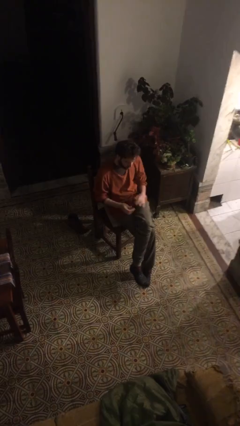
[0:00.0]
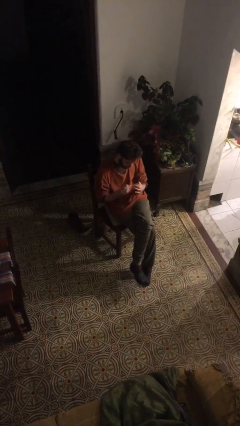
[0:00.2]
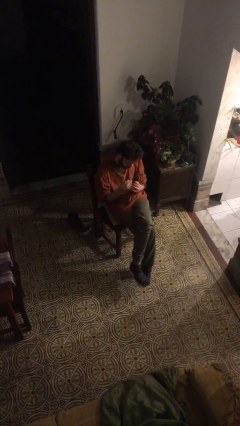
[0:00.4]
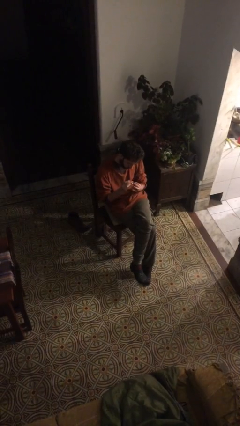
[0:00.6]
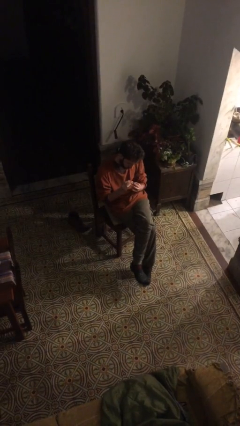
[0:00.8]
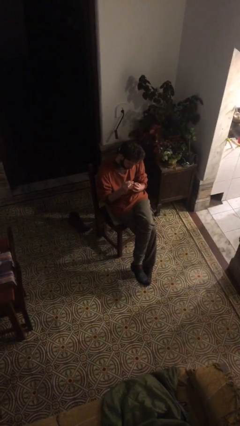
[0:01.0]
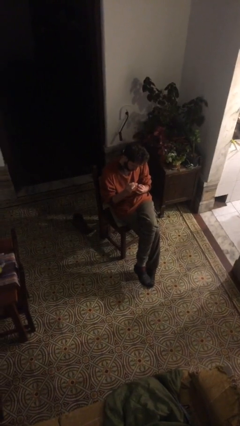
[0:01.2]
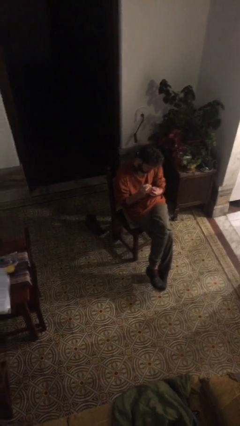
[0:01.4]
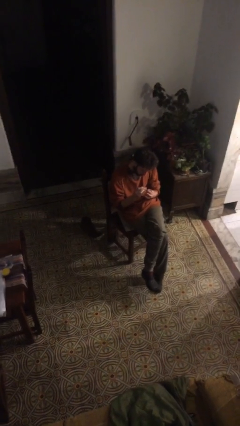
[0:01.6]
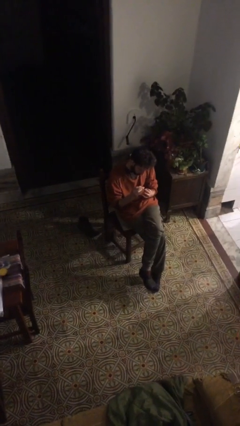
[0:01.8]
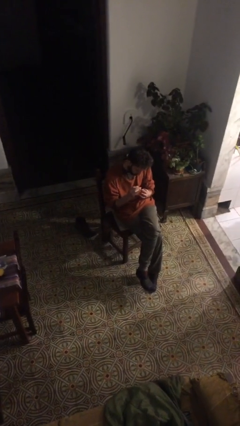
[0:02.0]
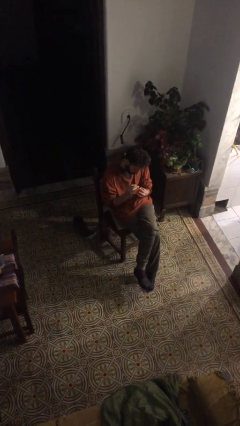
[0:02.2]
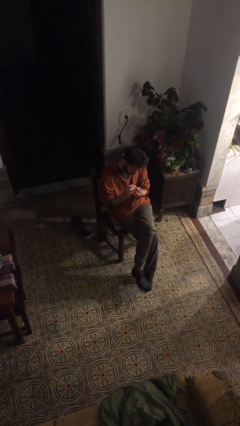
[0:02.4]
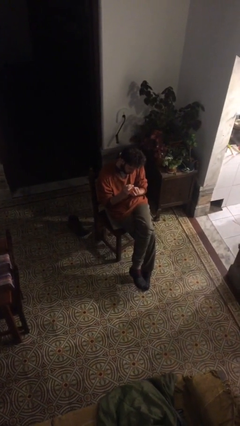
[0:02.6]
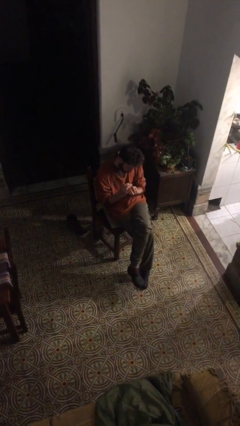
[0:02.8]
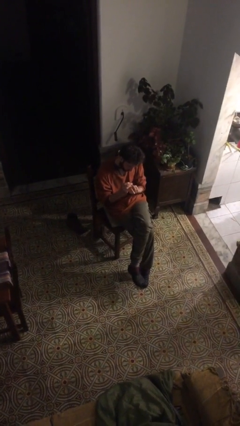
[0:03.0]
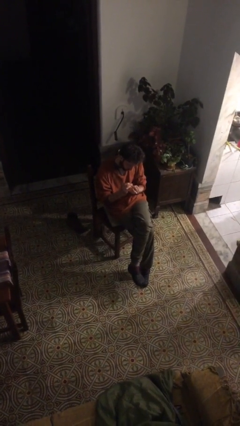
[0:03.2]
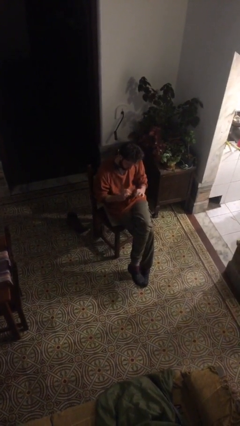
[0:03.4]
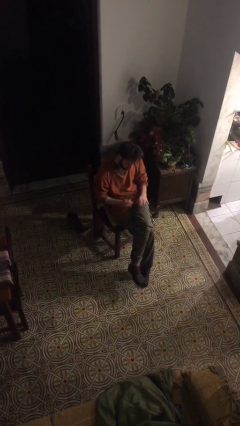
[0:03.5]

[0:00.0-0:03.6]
person clips fingernails

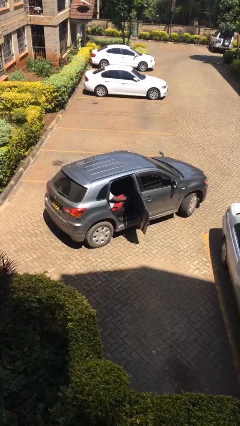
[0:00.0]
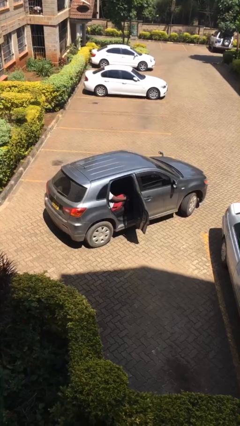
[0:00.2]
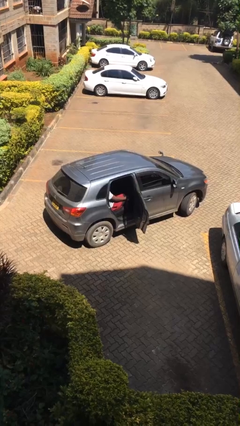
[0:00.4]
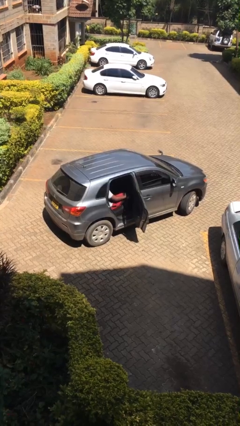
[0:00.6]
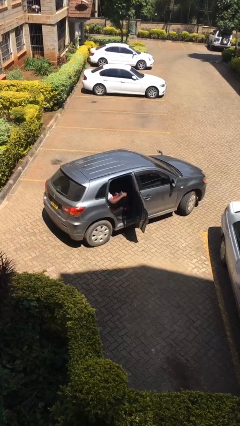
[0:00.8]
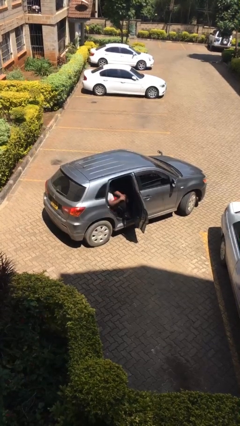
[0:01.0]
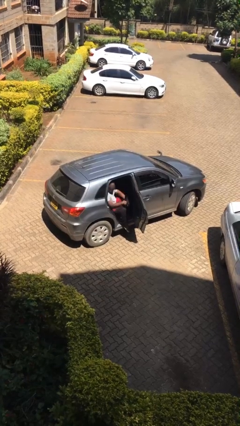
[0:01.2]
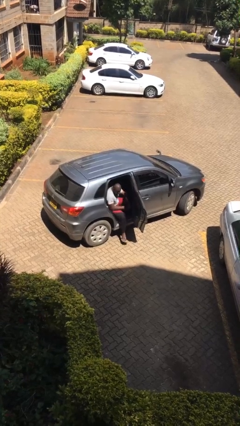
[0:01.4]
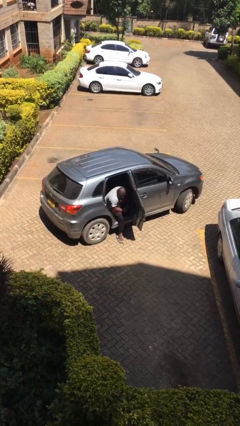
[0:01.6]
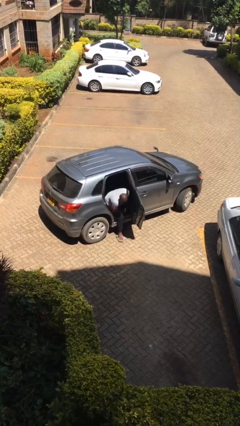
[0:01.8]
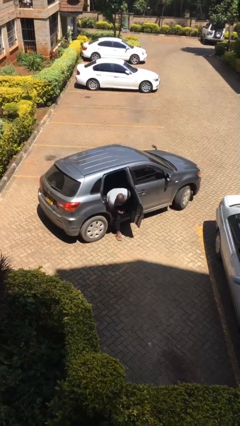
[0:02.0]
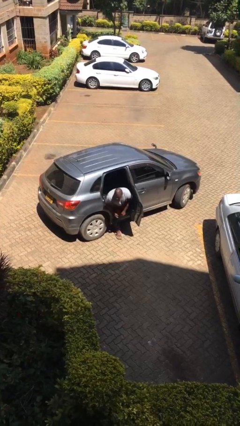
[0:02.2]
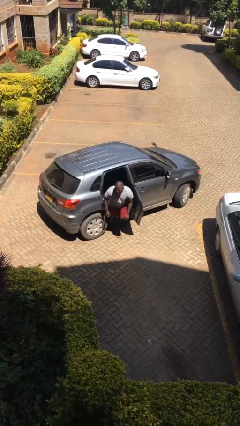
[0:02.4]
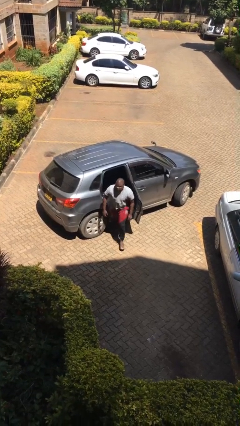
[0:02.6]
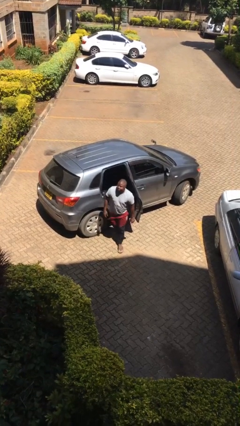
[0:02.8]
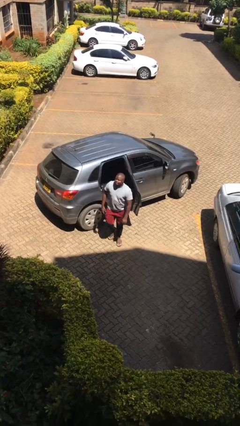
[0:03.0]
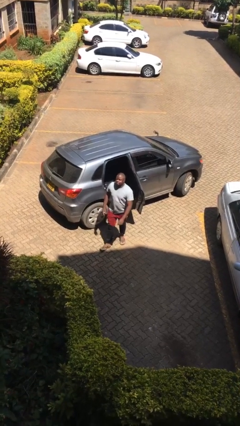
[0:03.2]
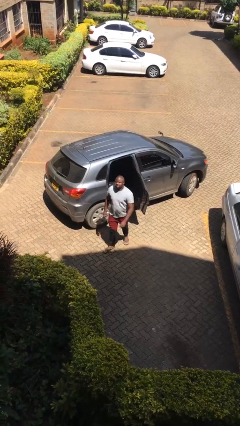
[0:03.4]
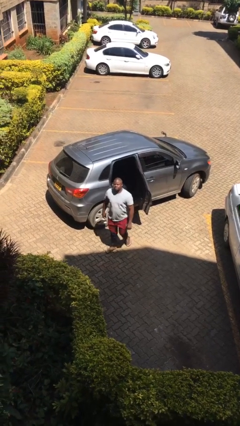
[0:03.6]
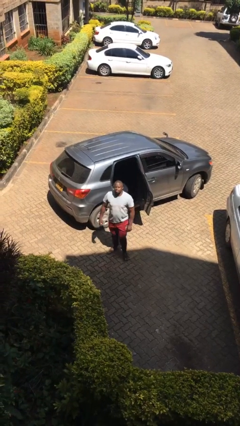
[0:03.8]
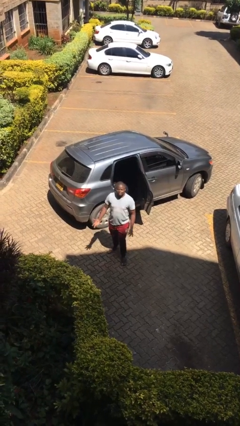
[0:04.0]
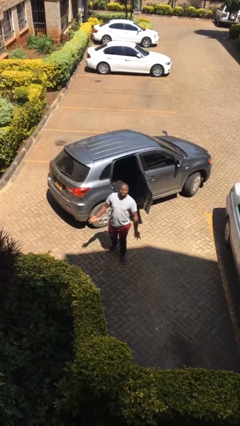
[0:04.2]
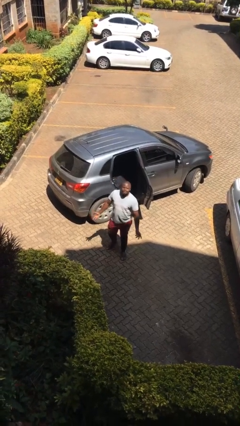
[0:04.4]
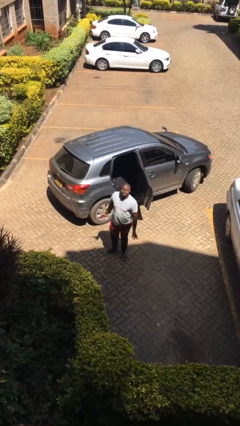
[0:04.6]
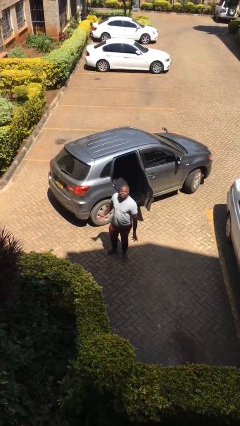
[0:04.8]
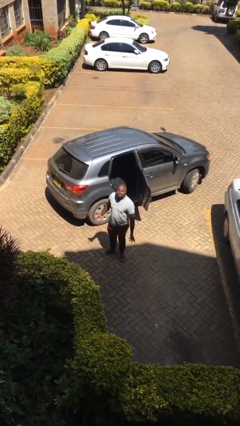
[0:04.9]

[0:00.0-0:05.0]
person exits car

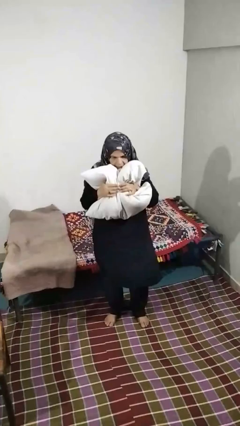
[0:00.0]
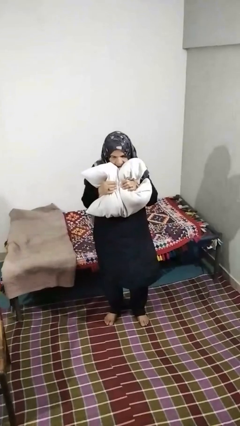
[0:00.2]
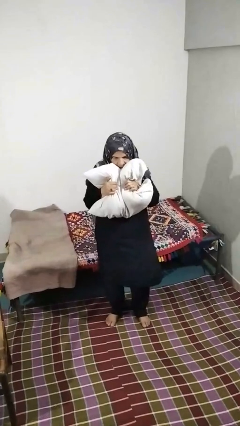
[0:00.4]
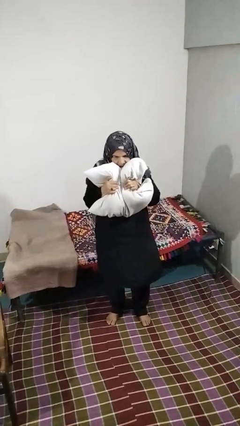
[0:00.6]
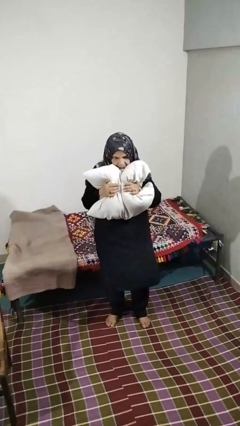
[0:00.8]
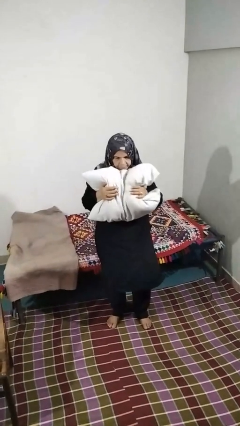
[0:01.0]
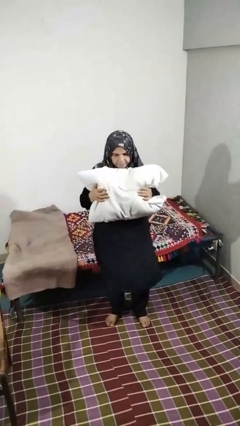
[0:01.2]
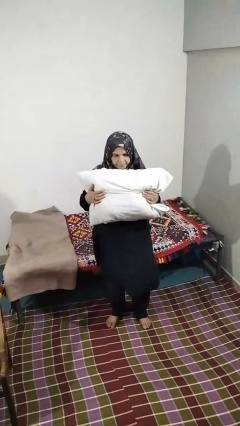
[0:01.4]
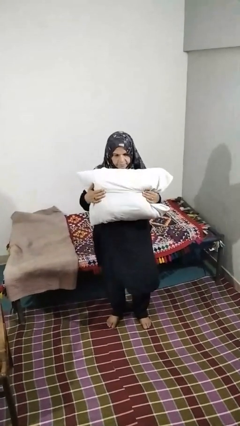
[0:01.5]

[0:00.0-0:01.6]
person squeezes object

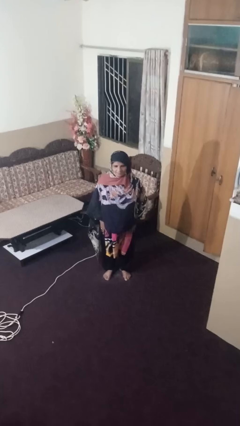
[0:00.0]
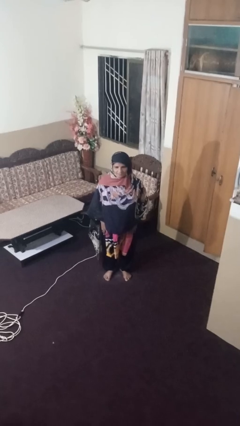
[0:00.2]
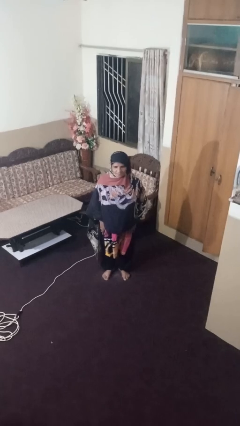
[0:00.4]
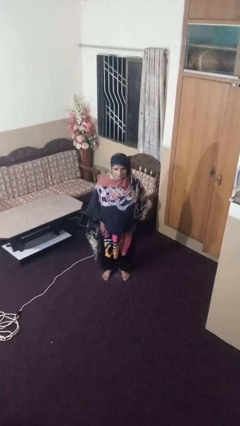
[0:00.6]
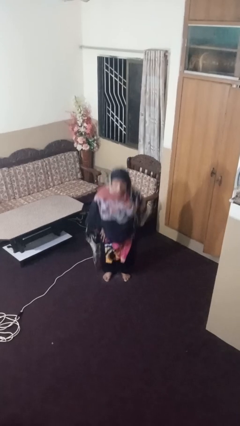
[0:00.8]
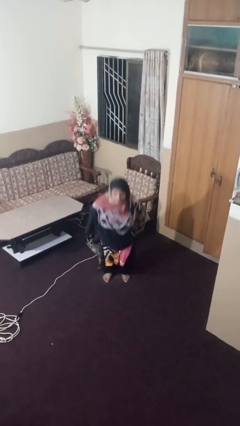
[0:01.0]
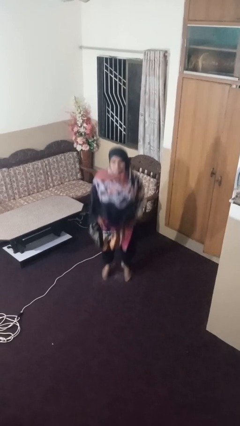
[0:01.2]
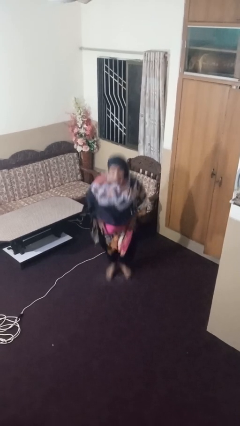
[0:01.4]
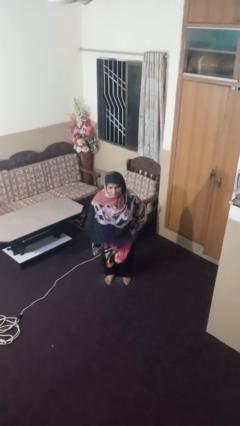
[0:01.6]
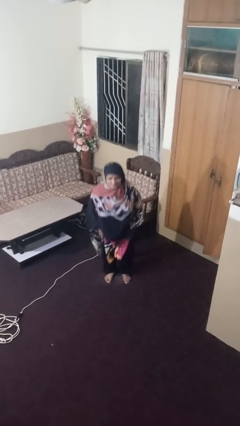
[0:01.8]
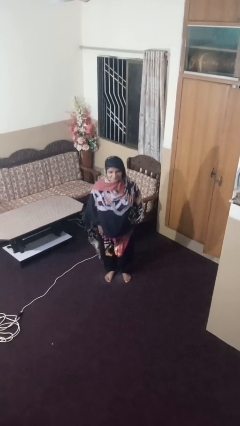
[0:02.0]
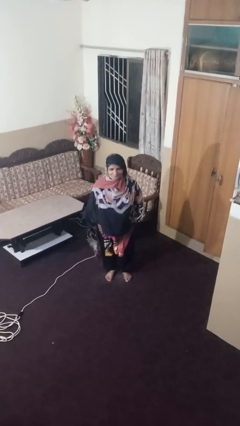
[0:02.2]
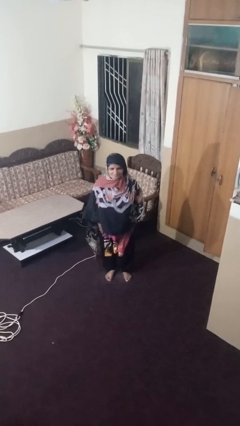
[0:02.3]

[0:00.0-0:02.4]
person jumps

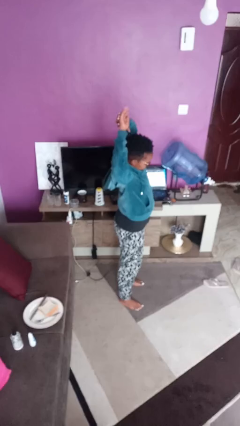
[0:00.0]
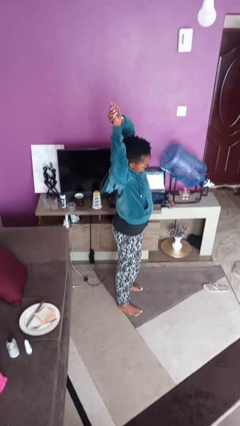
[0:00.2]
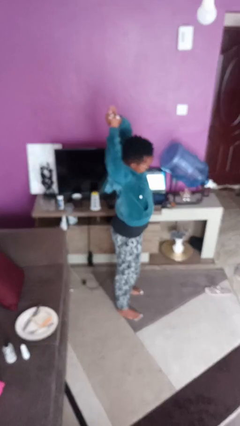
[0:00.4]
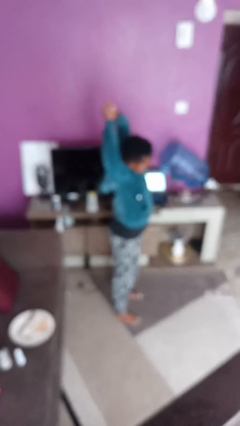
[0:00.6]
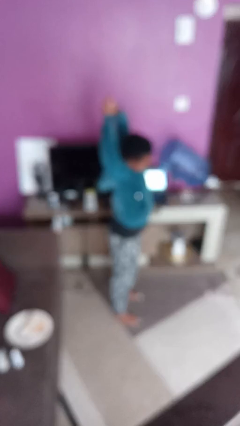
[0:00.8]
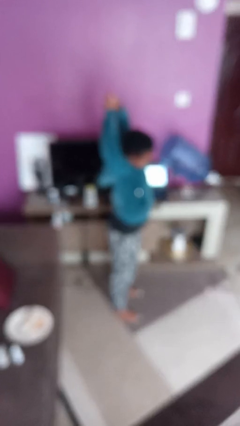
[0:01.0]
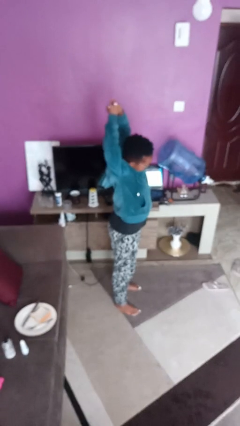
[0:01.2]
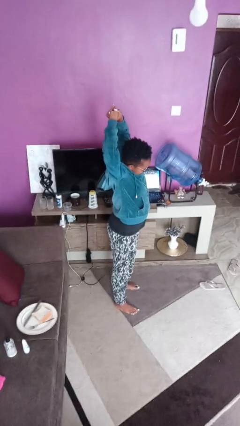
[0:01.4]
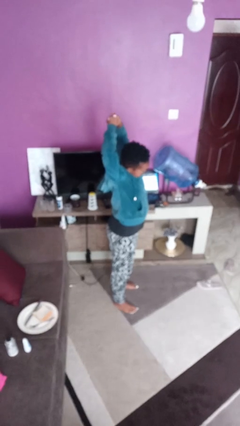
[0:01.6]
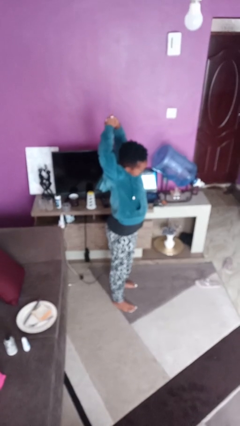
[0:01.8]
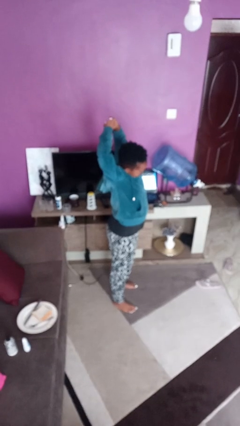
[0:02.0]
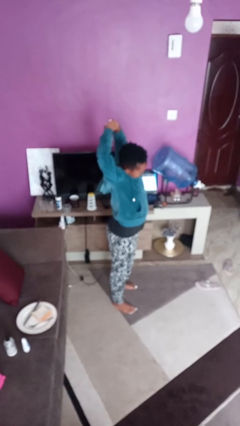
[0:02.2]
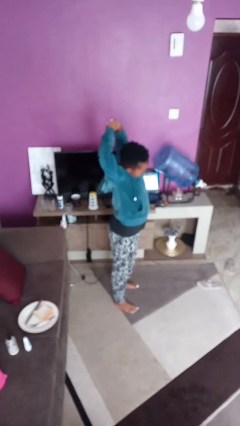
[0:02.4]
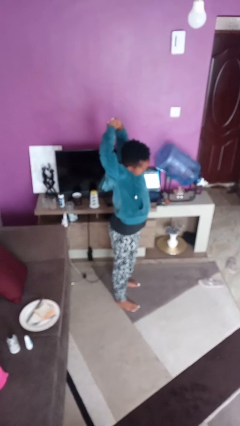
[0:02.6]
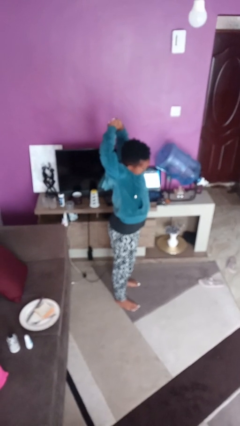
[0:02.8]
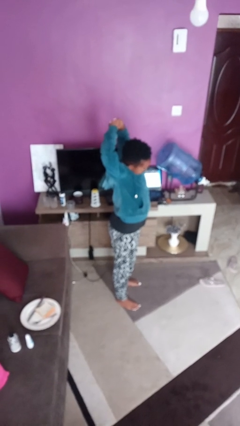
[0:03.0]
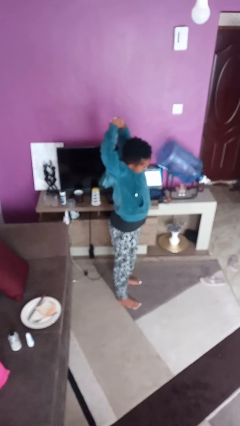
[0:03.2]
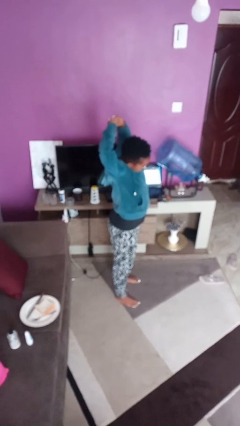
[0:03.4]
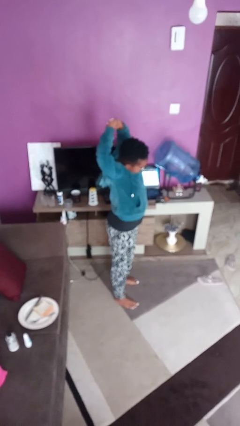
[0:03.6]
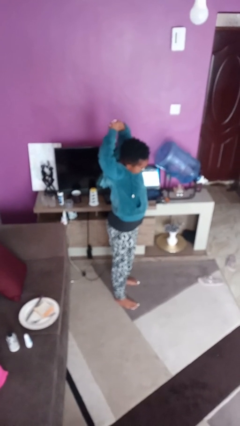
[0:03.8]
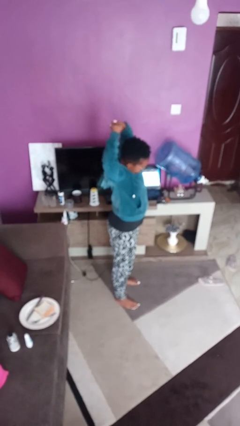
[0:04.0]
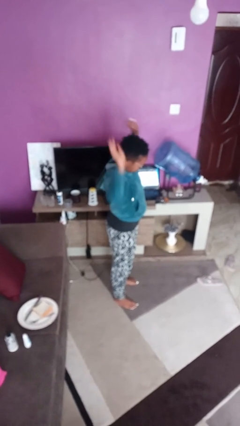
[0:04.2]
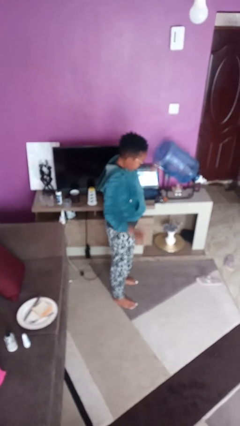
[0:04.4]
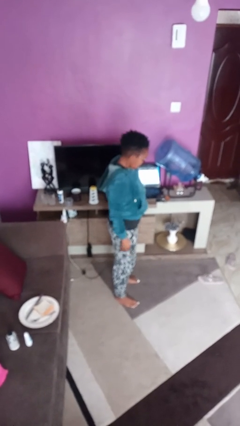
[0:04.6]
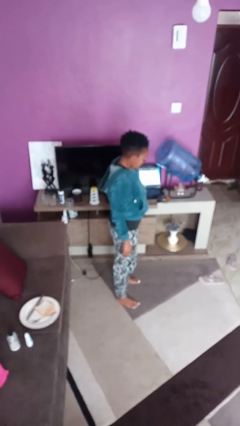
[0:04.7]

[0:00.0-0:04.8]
person stretches arms over head

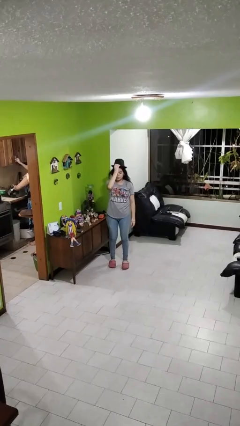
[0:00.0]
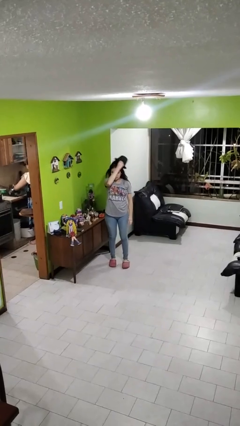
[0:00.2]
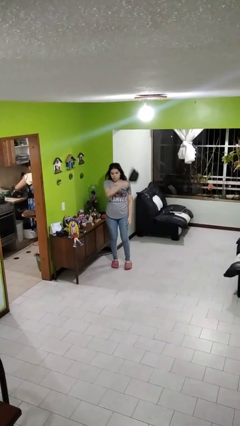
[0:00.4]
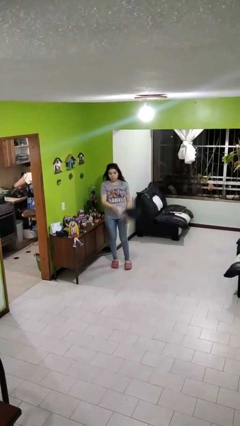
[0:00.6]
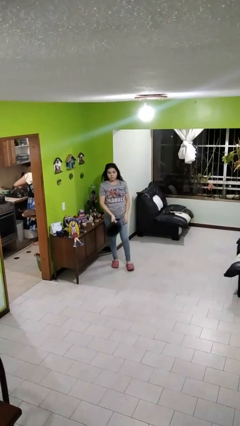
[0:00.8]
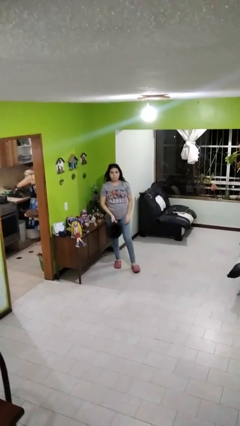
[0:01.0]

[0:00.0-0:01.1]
person takes off hat
